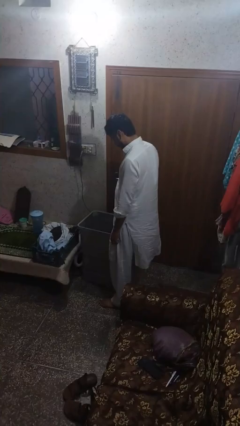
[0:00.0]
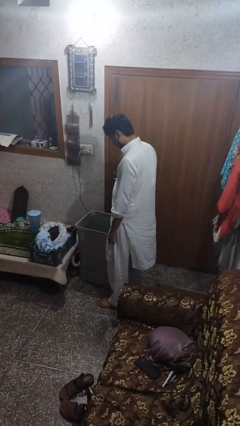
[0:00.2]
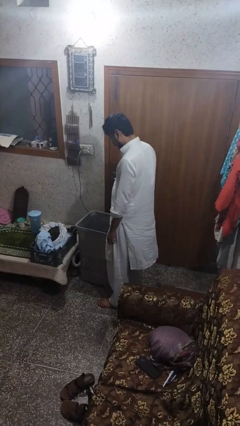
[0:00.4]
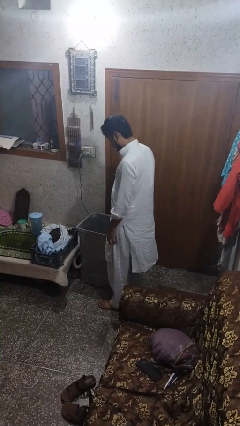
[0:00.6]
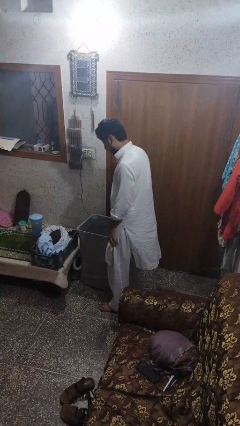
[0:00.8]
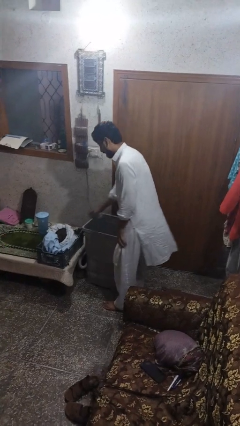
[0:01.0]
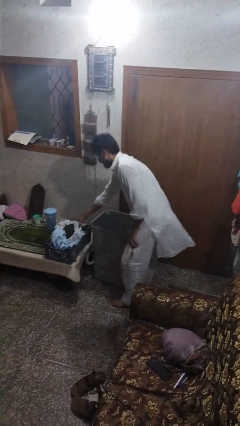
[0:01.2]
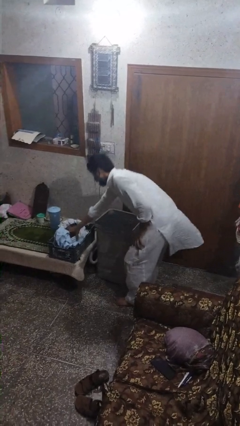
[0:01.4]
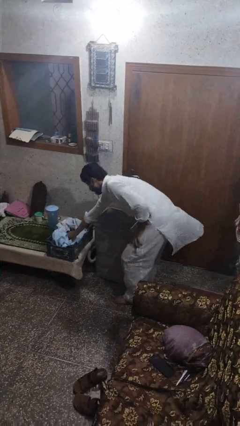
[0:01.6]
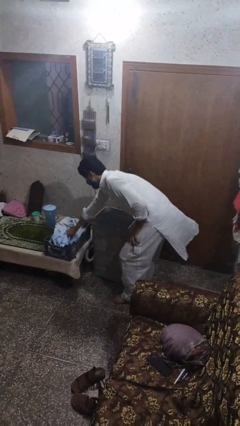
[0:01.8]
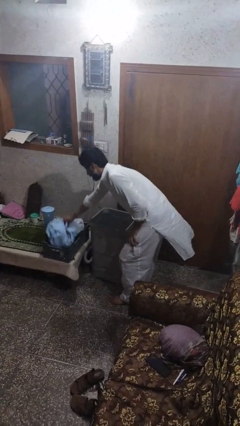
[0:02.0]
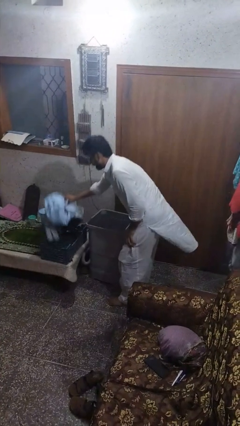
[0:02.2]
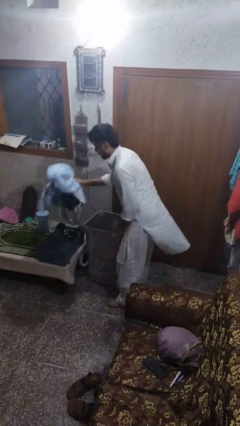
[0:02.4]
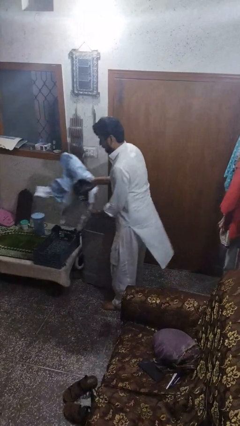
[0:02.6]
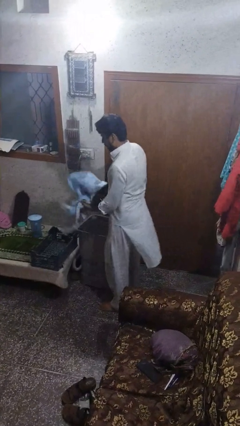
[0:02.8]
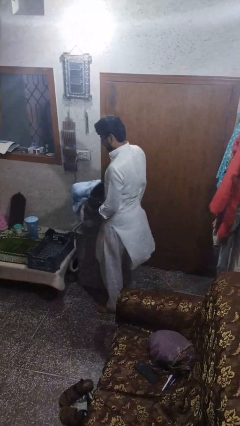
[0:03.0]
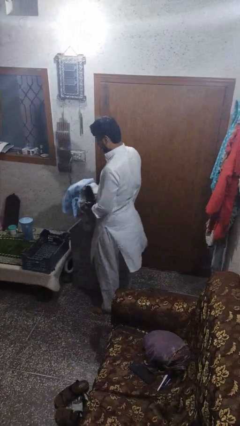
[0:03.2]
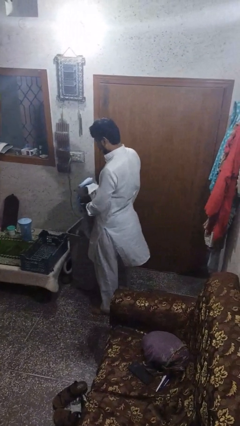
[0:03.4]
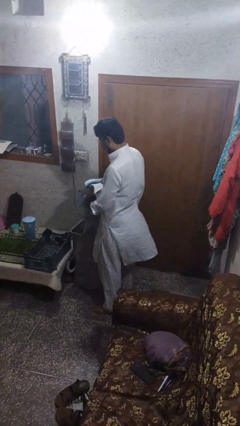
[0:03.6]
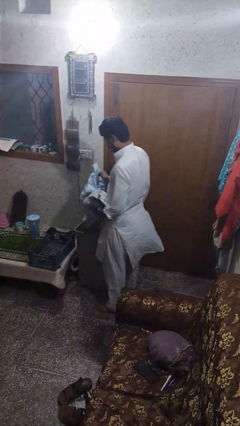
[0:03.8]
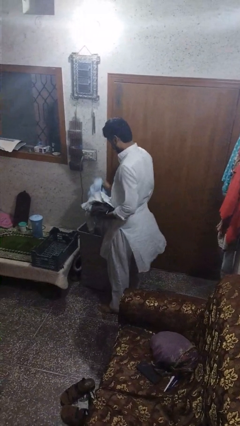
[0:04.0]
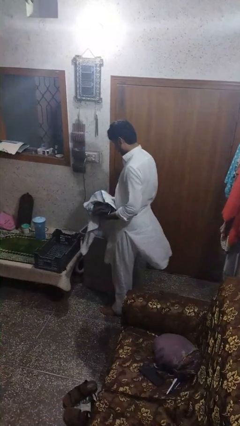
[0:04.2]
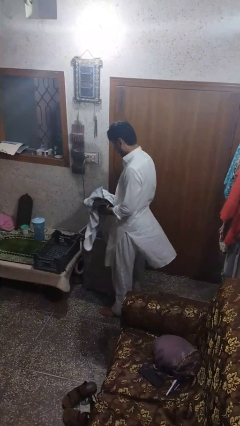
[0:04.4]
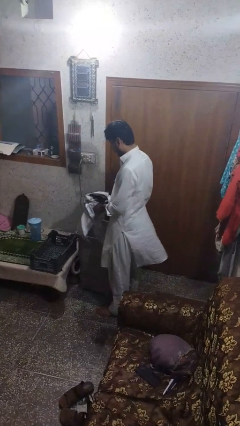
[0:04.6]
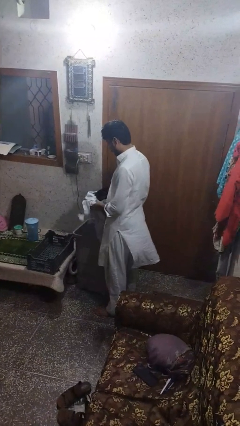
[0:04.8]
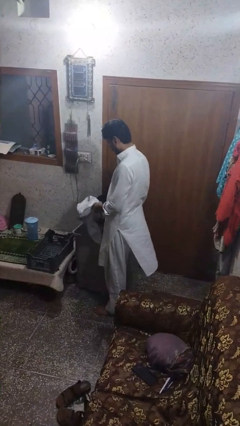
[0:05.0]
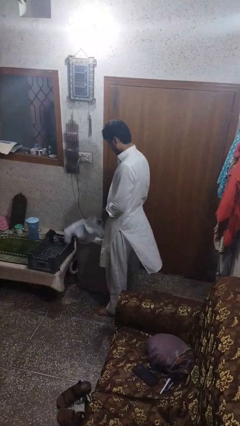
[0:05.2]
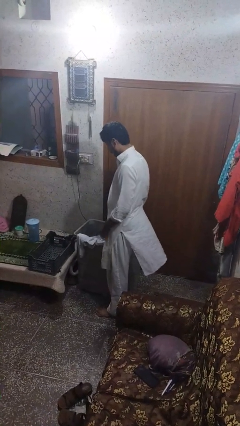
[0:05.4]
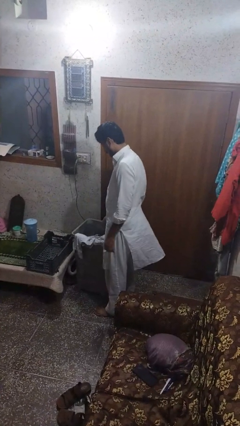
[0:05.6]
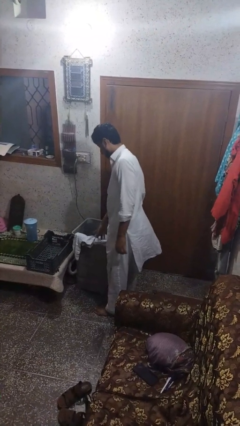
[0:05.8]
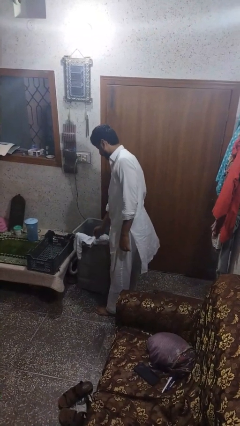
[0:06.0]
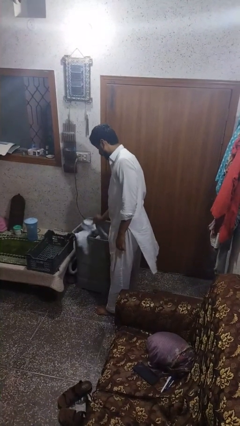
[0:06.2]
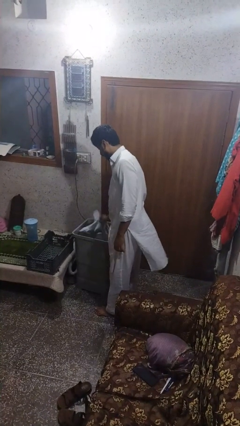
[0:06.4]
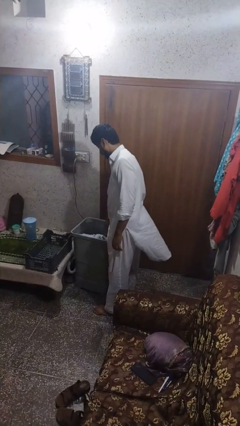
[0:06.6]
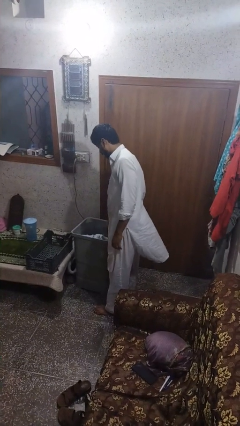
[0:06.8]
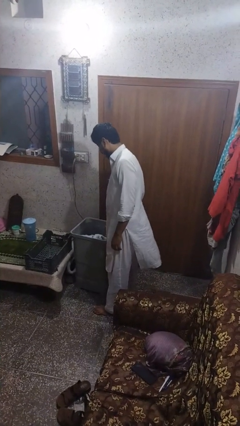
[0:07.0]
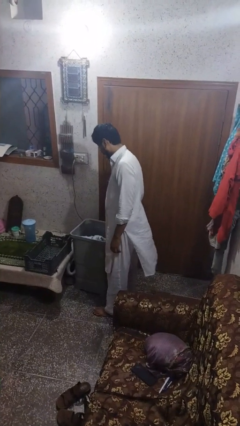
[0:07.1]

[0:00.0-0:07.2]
person loads dryer

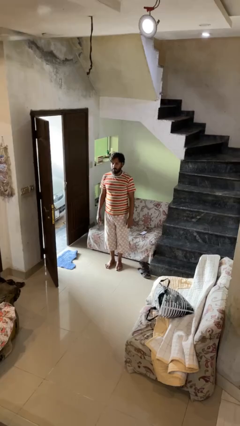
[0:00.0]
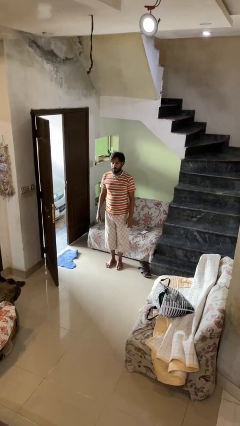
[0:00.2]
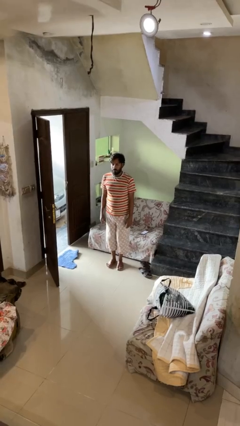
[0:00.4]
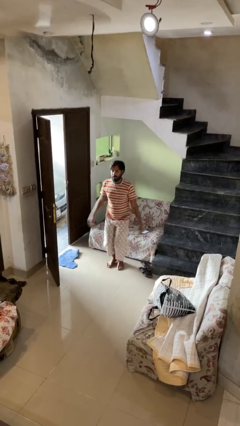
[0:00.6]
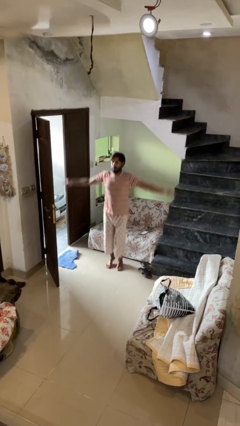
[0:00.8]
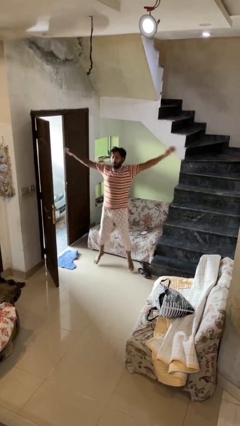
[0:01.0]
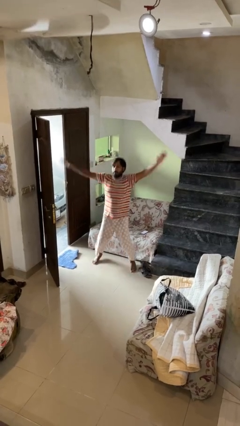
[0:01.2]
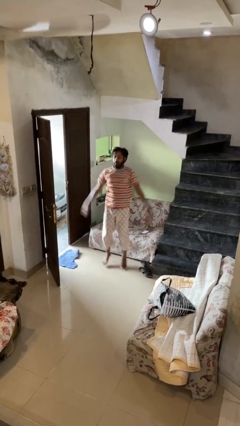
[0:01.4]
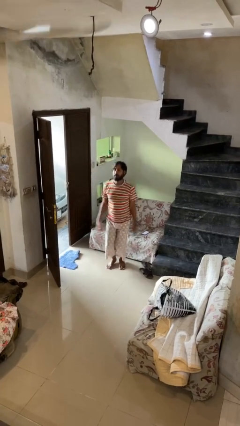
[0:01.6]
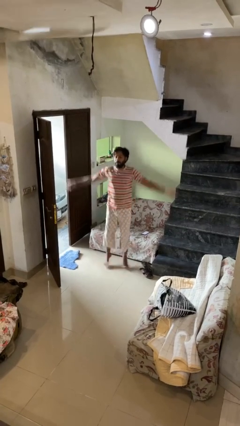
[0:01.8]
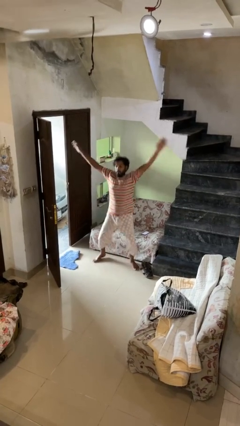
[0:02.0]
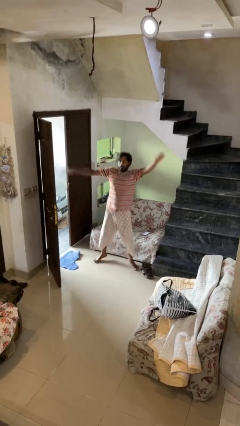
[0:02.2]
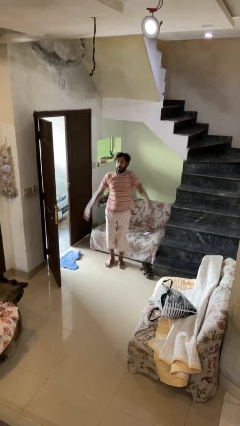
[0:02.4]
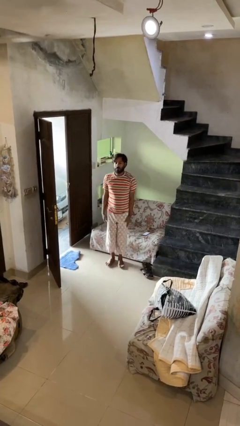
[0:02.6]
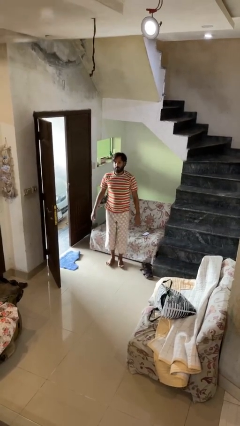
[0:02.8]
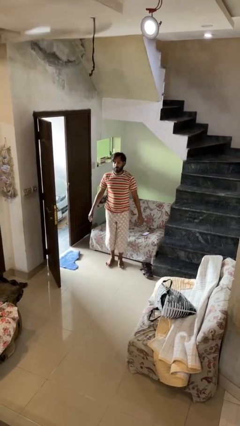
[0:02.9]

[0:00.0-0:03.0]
person exercises with jumping jacks

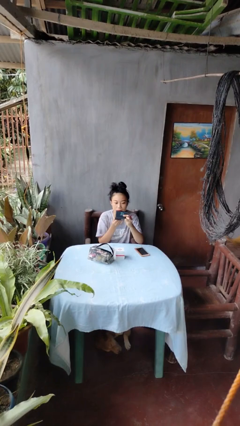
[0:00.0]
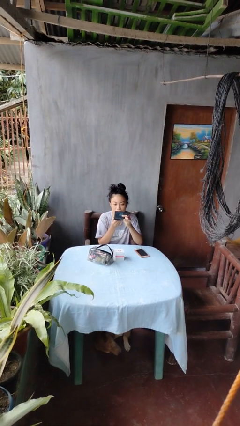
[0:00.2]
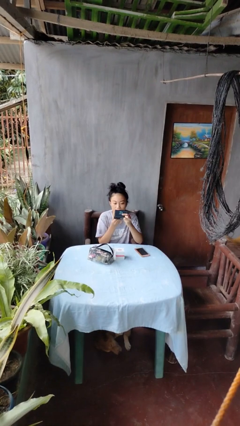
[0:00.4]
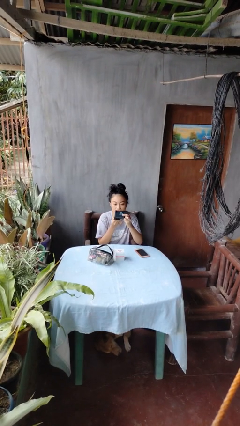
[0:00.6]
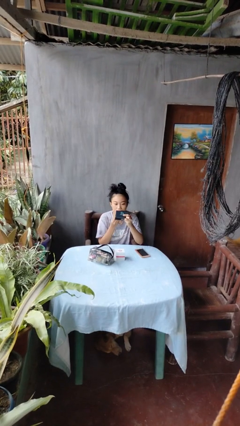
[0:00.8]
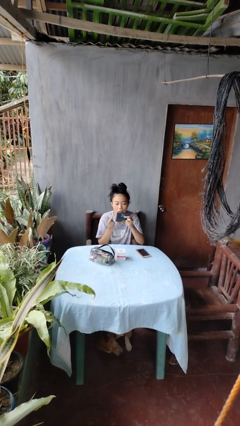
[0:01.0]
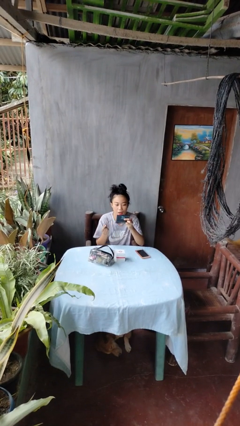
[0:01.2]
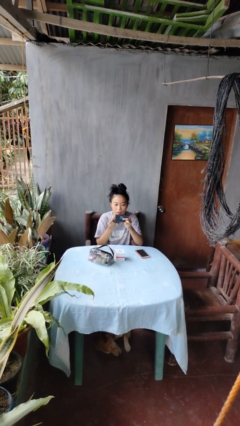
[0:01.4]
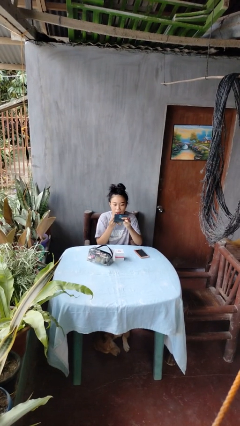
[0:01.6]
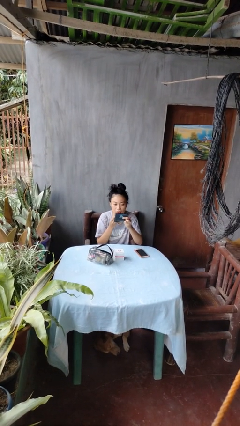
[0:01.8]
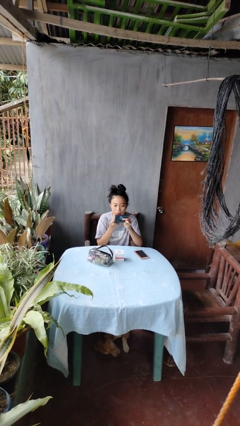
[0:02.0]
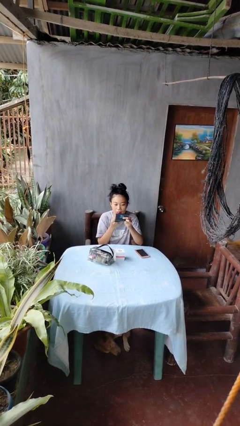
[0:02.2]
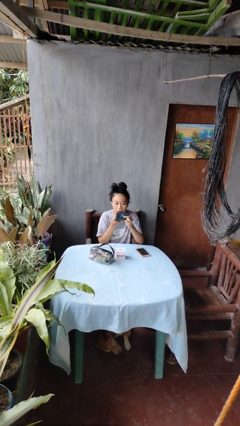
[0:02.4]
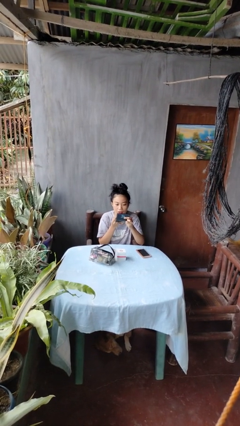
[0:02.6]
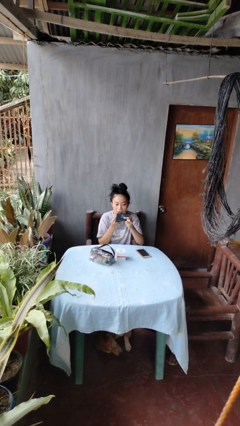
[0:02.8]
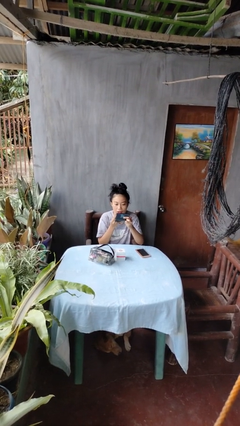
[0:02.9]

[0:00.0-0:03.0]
person applies lip makeup

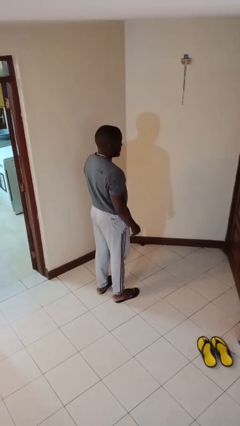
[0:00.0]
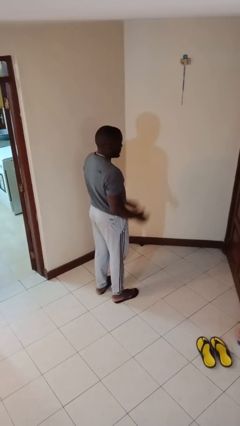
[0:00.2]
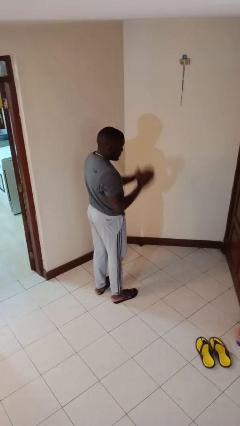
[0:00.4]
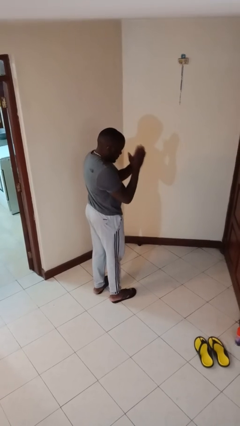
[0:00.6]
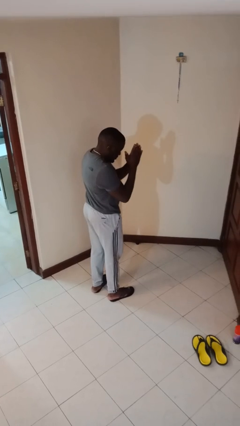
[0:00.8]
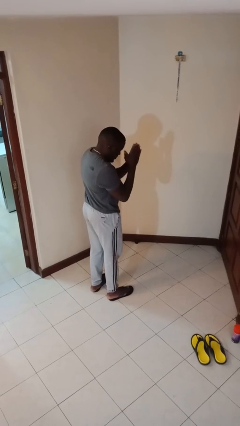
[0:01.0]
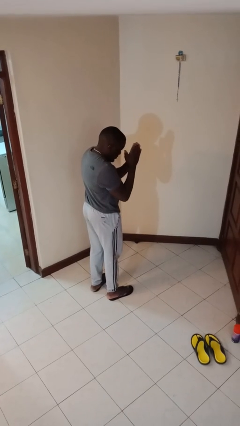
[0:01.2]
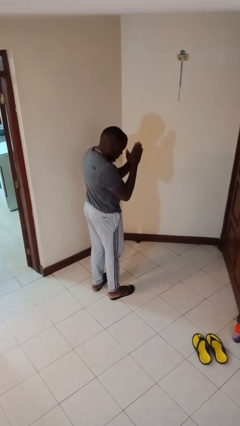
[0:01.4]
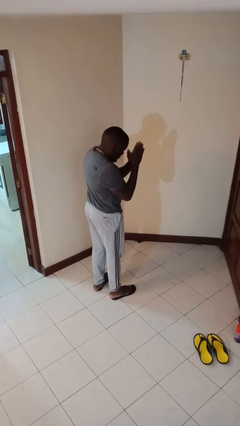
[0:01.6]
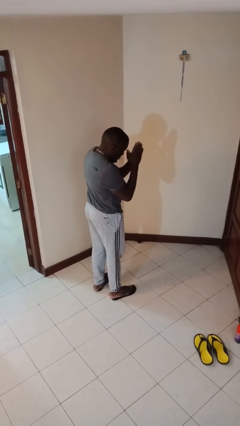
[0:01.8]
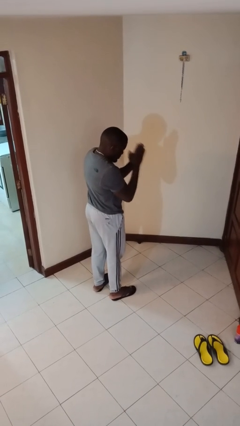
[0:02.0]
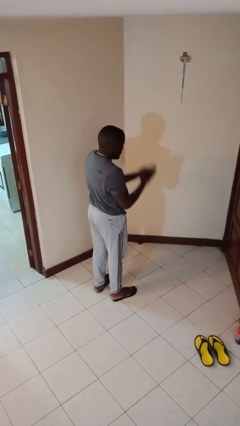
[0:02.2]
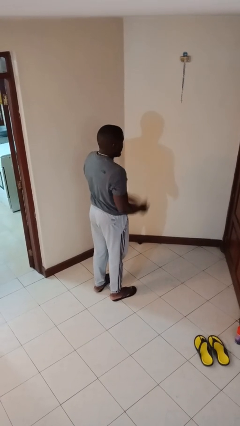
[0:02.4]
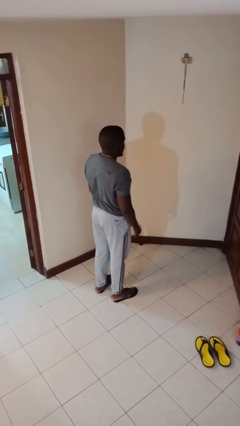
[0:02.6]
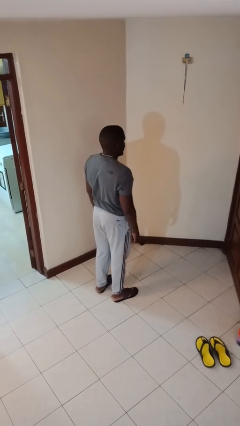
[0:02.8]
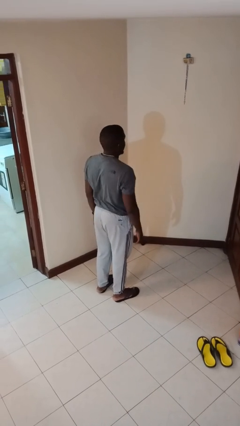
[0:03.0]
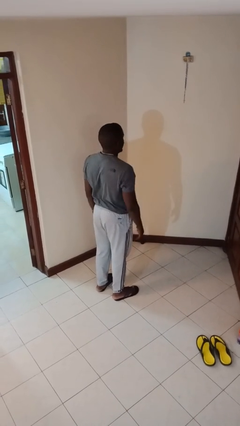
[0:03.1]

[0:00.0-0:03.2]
person prays

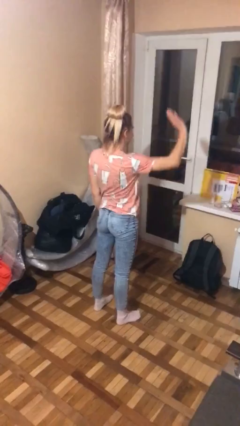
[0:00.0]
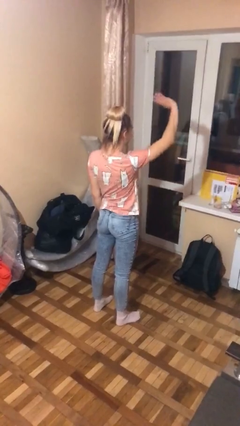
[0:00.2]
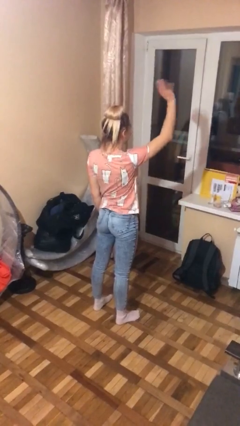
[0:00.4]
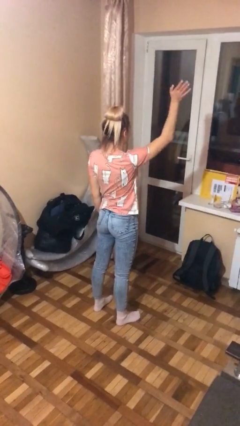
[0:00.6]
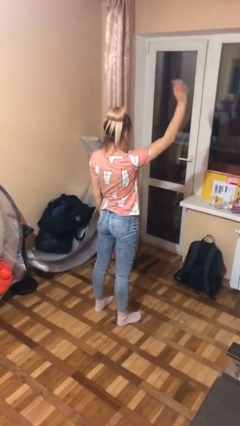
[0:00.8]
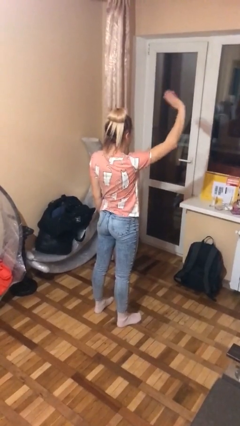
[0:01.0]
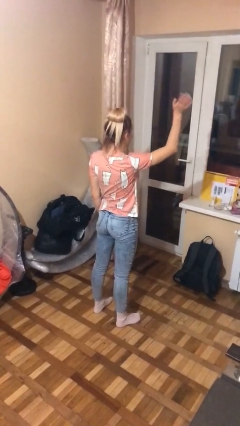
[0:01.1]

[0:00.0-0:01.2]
person salutes

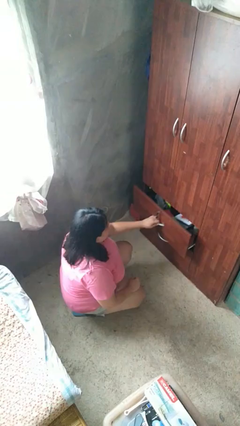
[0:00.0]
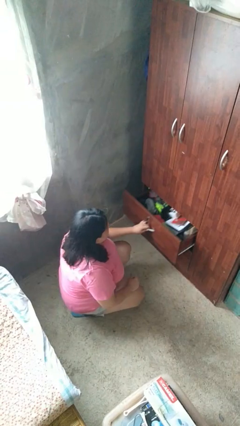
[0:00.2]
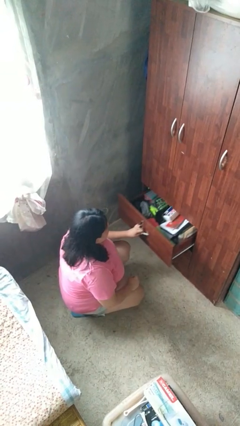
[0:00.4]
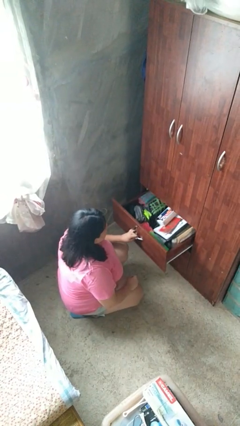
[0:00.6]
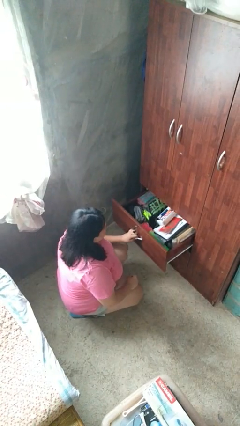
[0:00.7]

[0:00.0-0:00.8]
person opens dresser drawer
